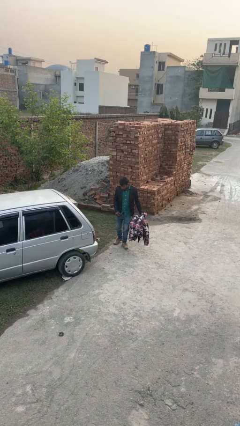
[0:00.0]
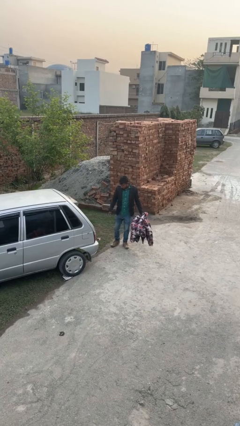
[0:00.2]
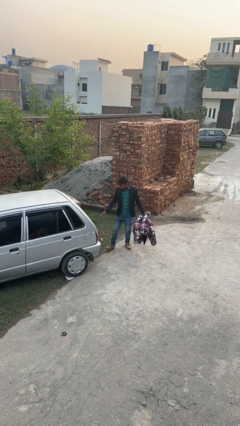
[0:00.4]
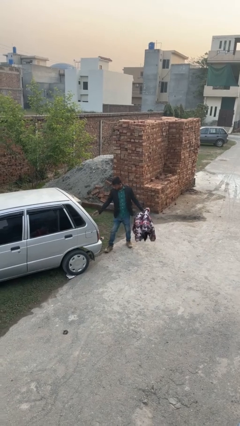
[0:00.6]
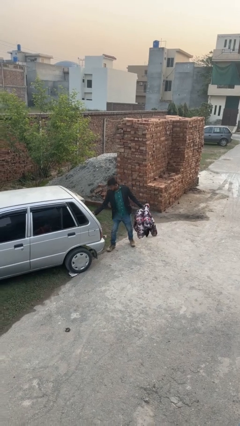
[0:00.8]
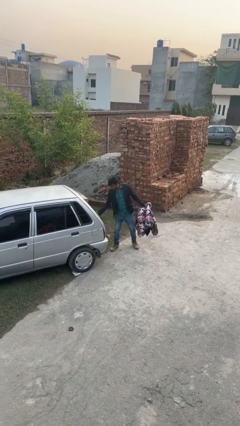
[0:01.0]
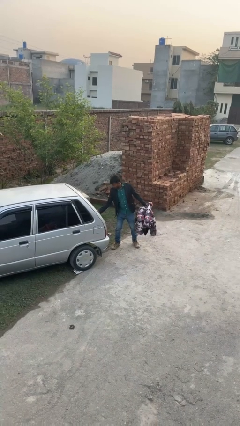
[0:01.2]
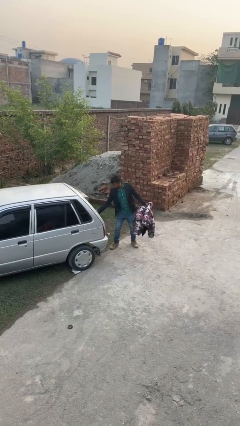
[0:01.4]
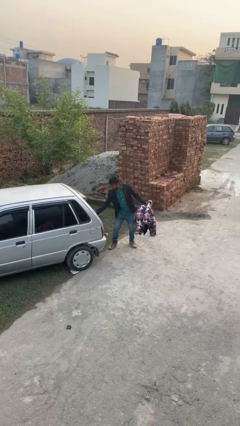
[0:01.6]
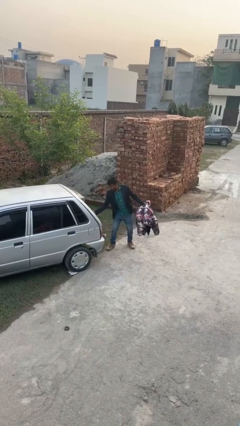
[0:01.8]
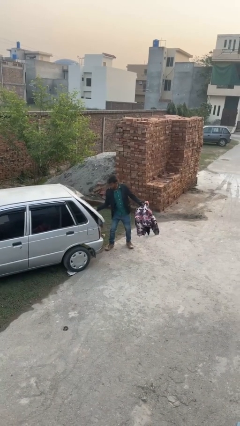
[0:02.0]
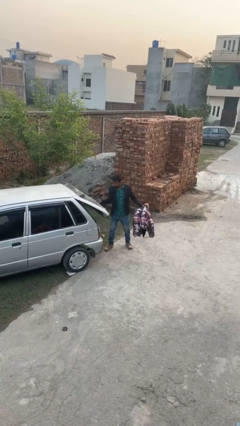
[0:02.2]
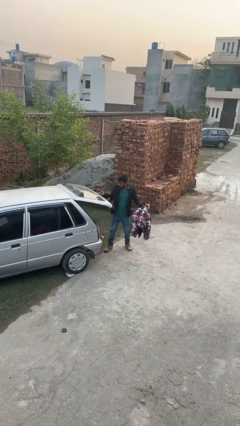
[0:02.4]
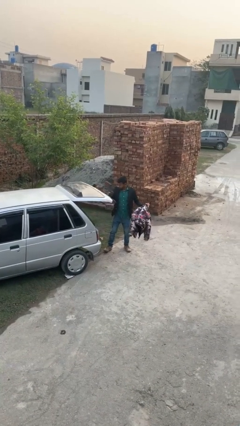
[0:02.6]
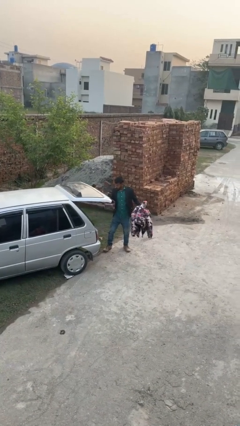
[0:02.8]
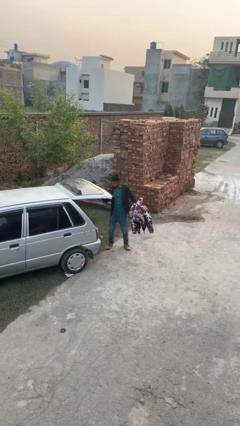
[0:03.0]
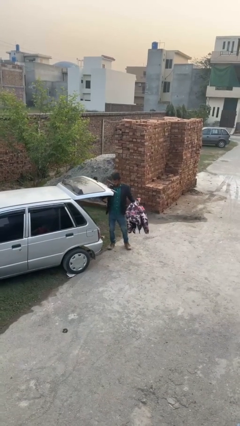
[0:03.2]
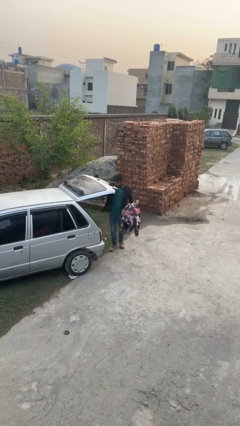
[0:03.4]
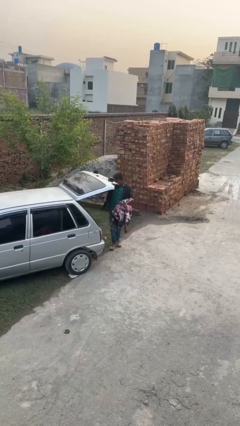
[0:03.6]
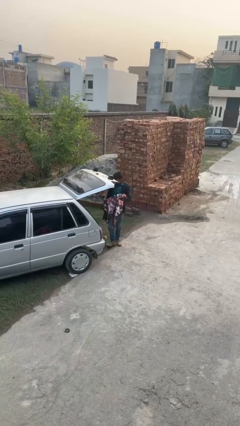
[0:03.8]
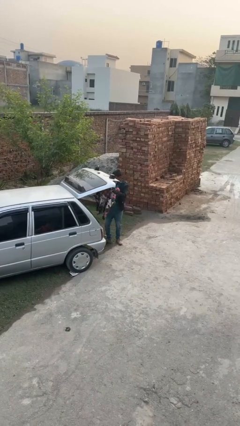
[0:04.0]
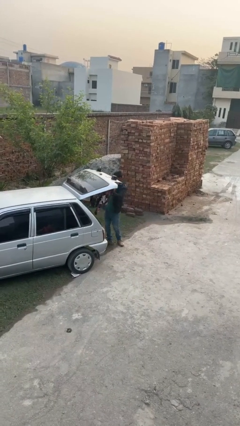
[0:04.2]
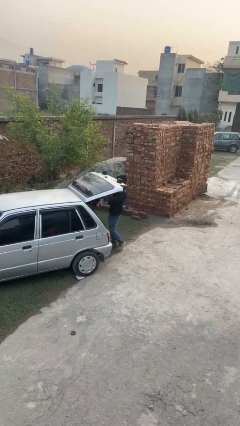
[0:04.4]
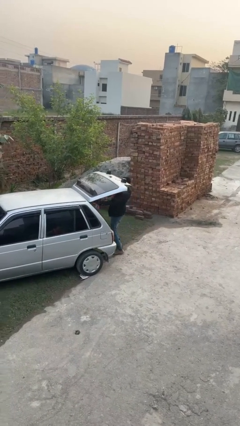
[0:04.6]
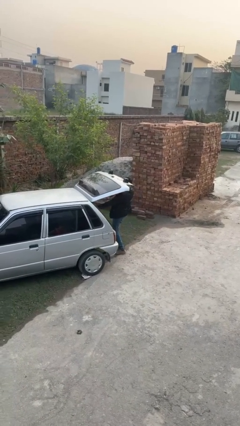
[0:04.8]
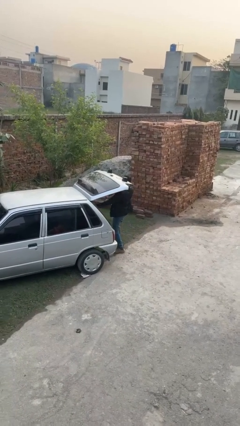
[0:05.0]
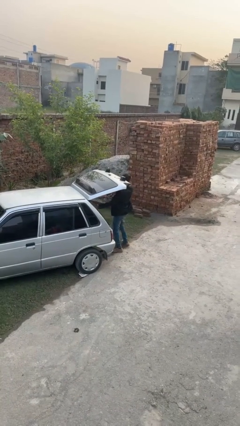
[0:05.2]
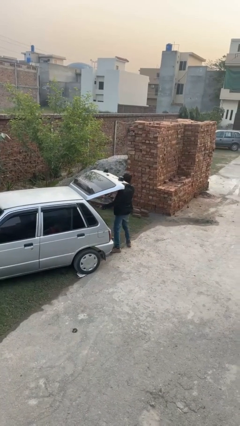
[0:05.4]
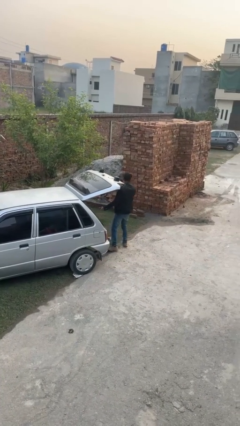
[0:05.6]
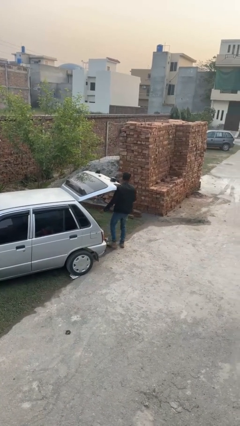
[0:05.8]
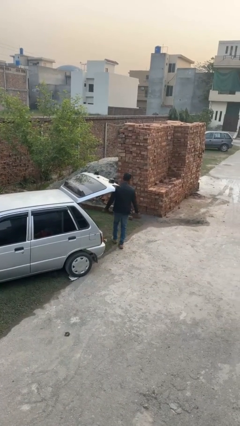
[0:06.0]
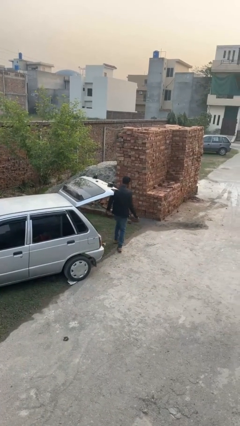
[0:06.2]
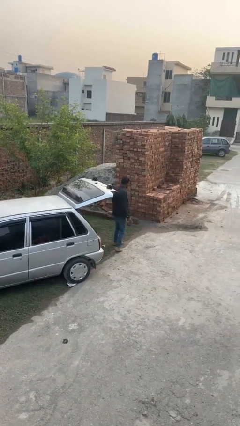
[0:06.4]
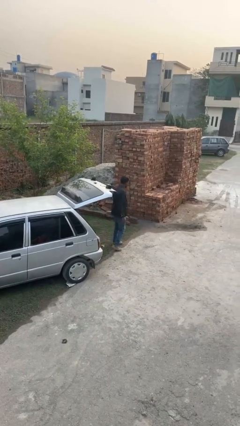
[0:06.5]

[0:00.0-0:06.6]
person loads car

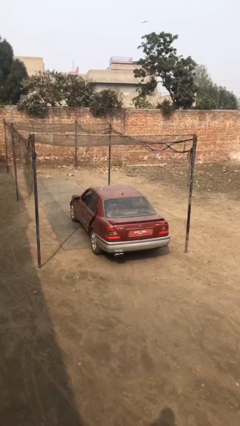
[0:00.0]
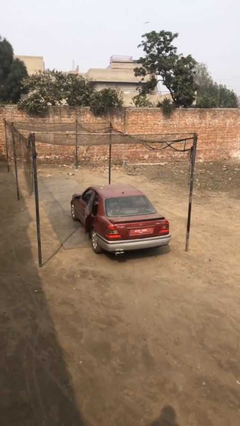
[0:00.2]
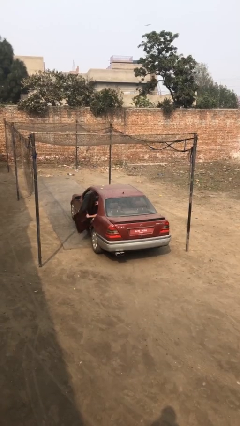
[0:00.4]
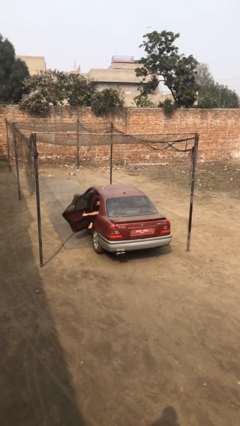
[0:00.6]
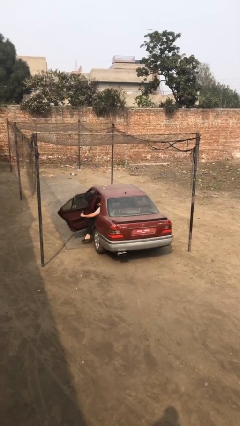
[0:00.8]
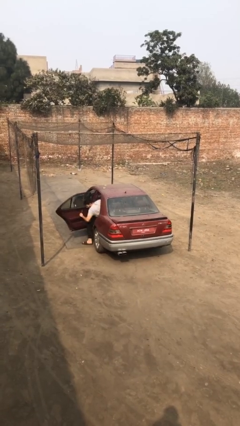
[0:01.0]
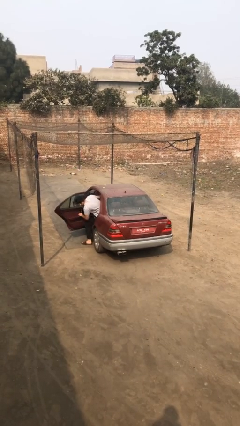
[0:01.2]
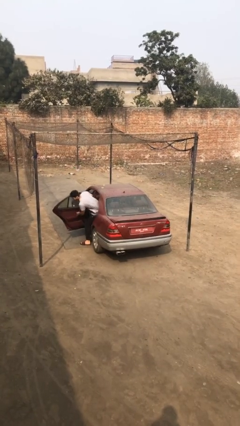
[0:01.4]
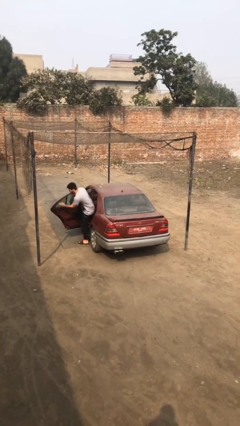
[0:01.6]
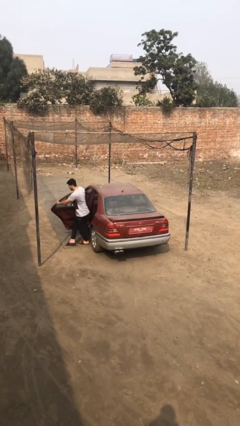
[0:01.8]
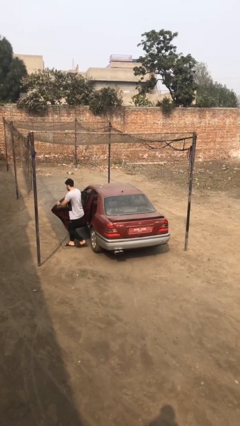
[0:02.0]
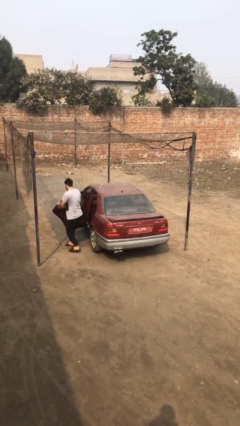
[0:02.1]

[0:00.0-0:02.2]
car drops off person

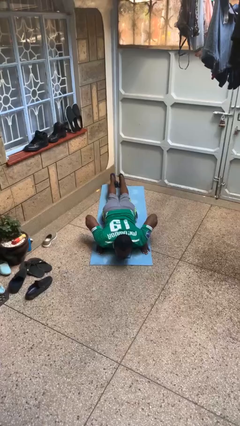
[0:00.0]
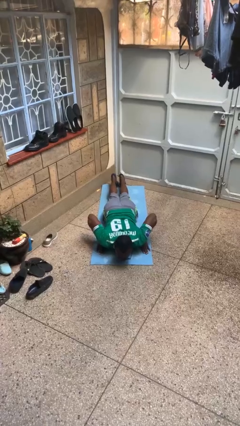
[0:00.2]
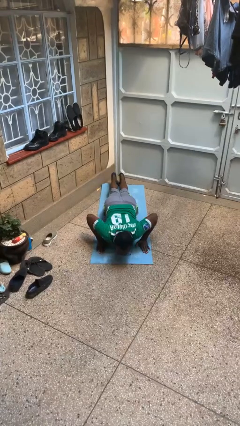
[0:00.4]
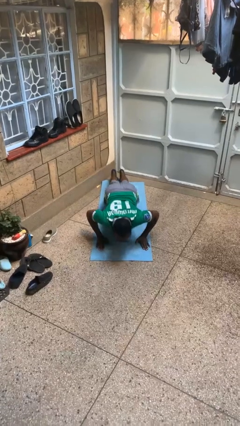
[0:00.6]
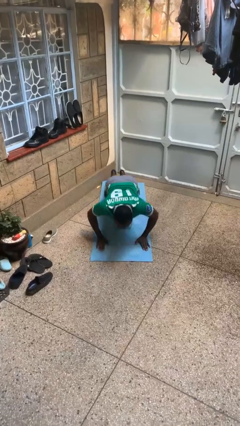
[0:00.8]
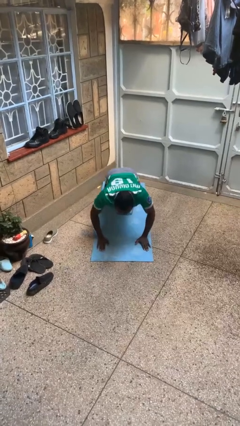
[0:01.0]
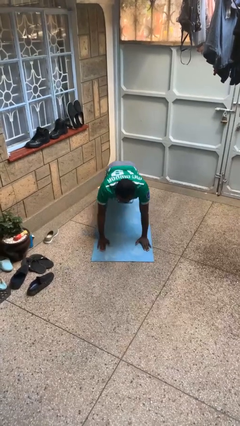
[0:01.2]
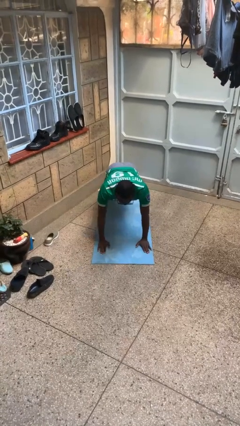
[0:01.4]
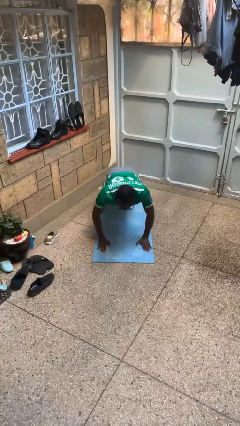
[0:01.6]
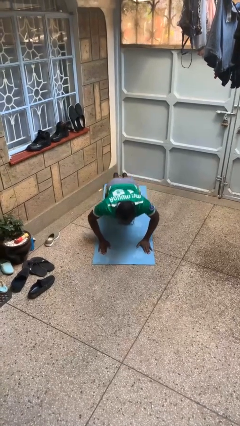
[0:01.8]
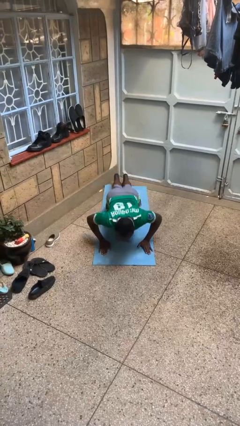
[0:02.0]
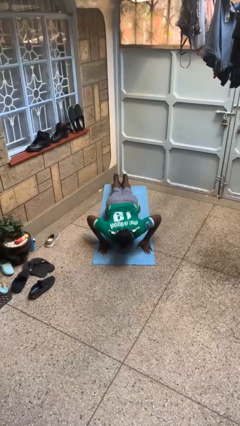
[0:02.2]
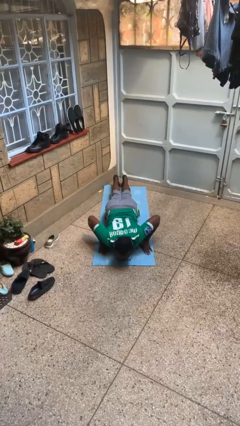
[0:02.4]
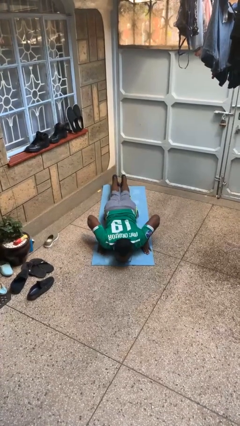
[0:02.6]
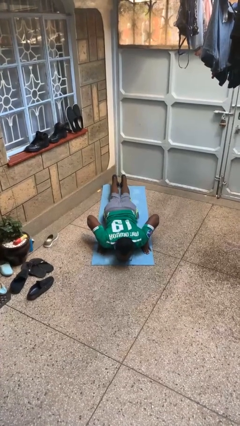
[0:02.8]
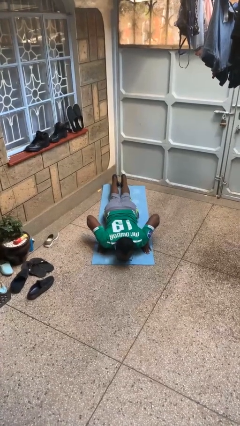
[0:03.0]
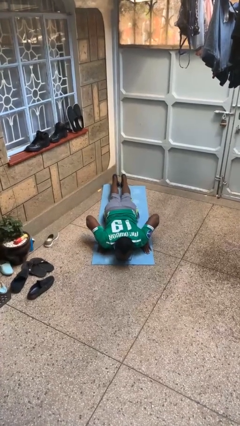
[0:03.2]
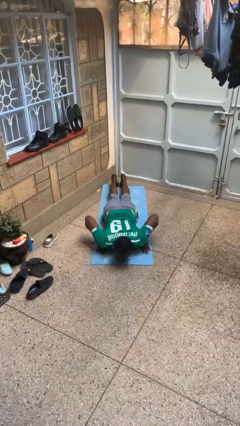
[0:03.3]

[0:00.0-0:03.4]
person exercises with pushup

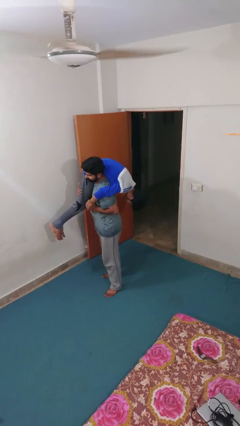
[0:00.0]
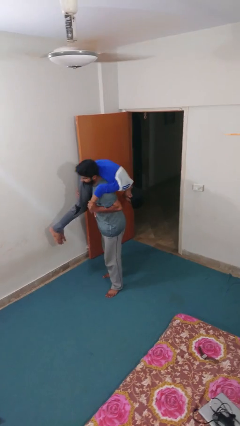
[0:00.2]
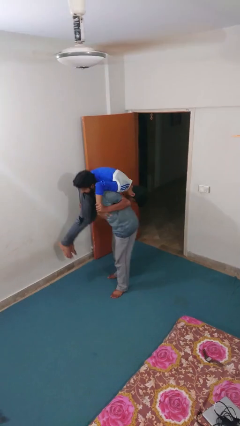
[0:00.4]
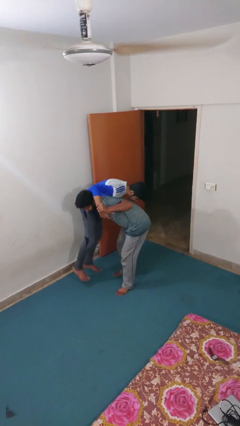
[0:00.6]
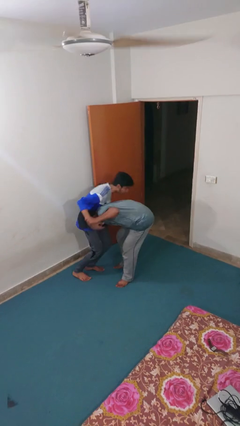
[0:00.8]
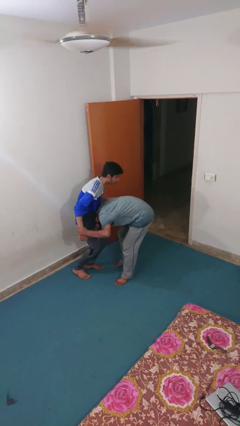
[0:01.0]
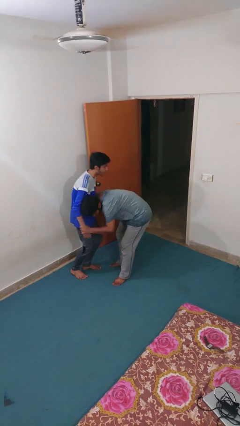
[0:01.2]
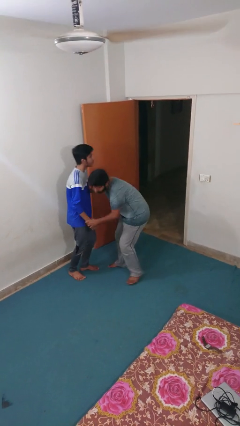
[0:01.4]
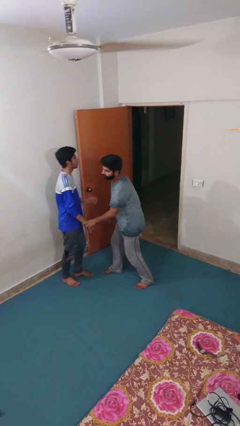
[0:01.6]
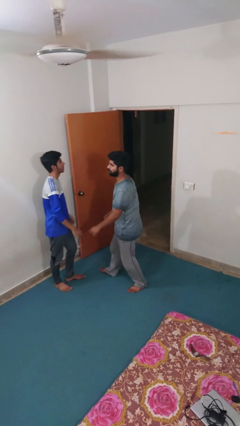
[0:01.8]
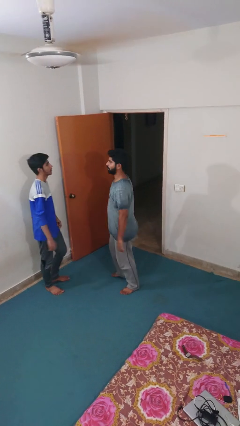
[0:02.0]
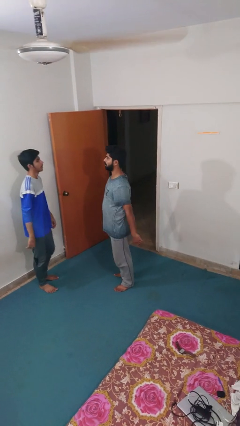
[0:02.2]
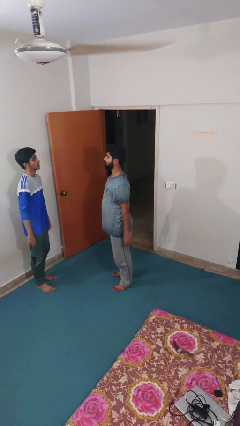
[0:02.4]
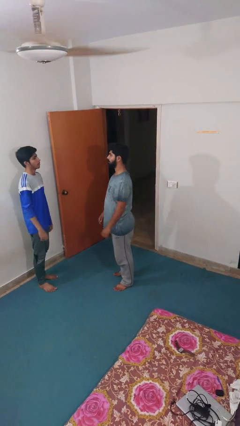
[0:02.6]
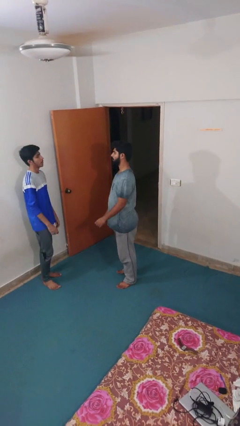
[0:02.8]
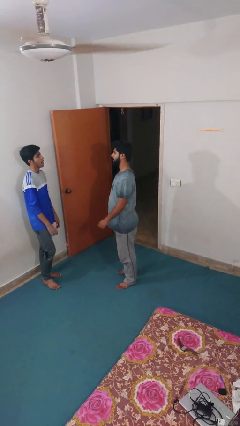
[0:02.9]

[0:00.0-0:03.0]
person puts down person

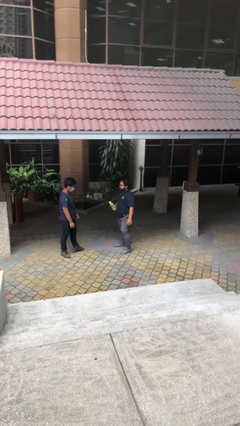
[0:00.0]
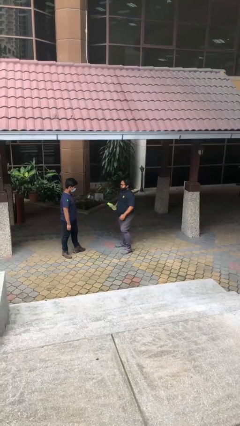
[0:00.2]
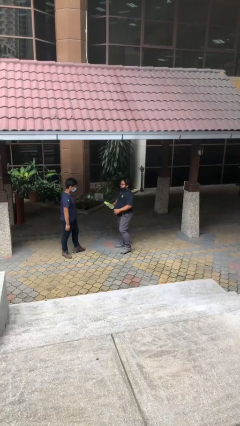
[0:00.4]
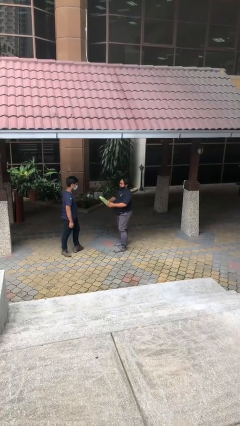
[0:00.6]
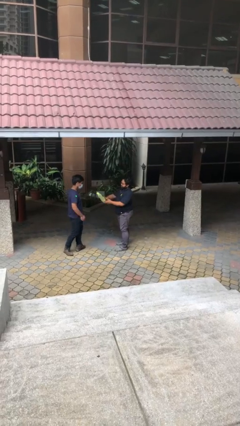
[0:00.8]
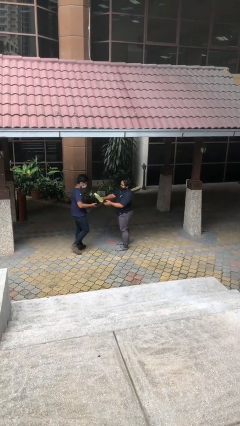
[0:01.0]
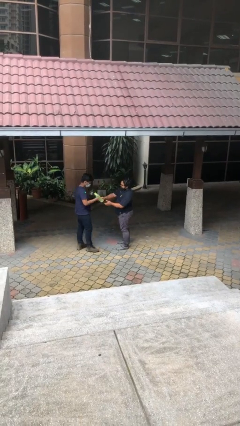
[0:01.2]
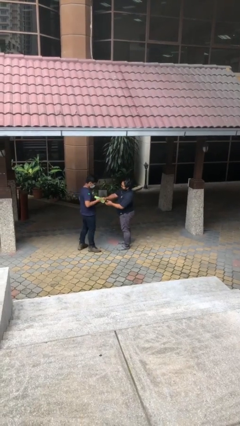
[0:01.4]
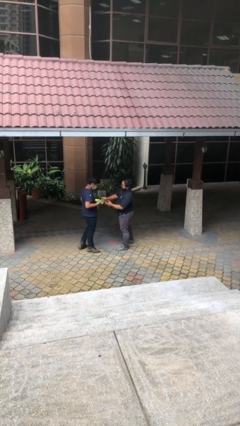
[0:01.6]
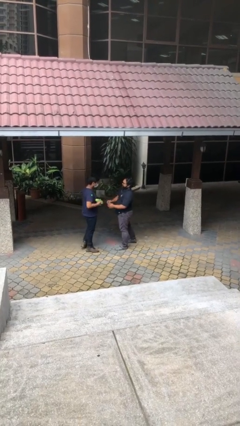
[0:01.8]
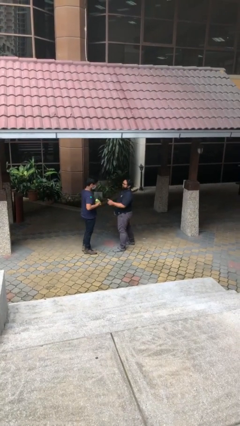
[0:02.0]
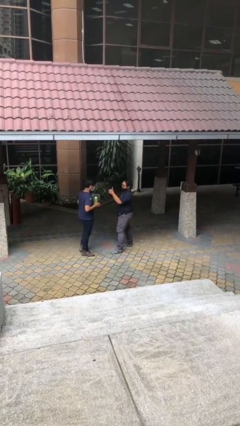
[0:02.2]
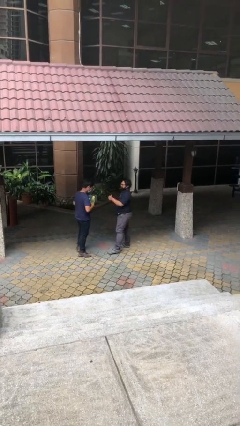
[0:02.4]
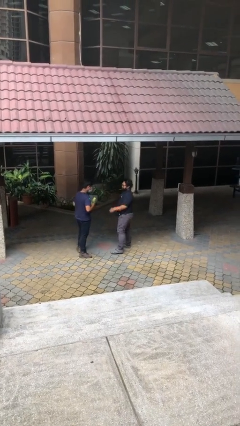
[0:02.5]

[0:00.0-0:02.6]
person transfers object to person
